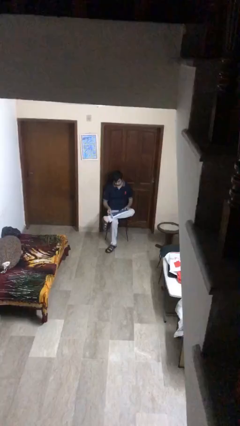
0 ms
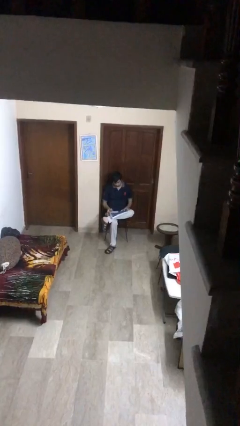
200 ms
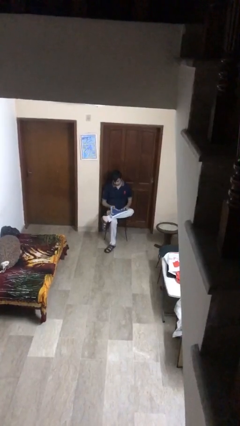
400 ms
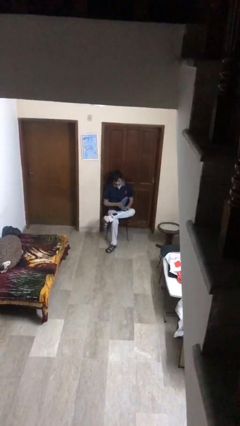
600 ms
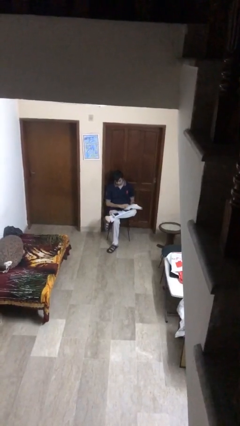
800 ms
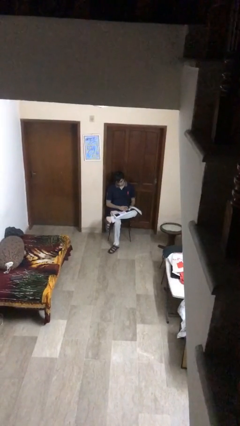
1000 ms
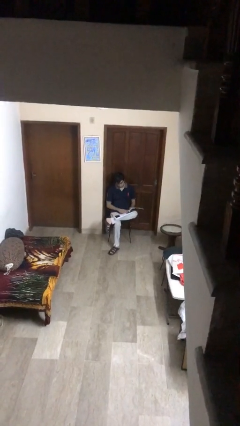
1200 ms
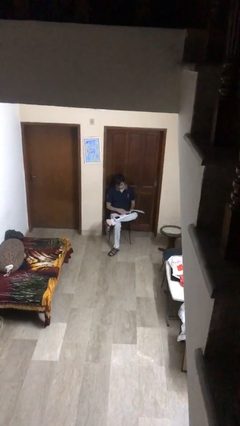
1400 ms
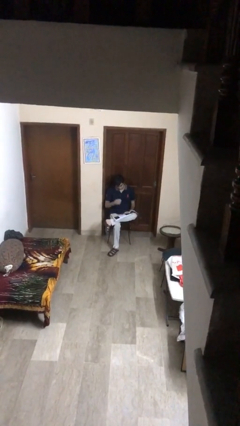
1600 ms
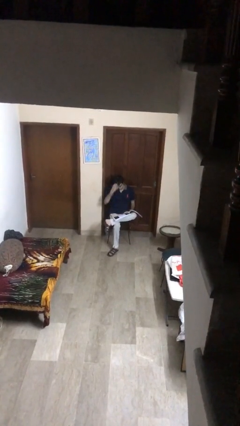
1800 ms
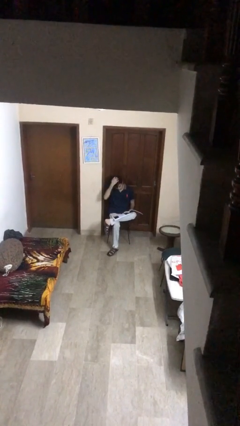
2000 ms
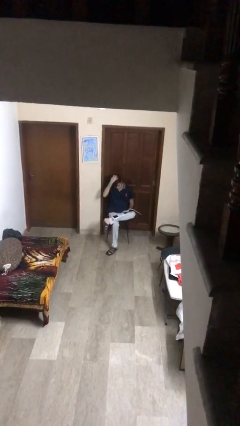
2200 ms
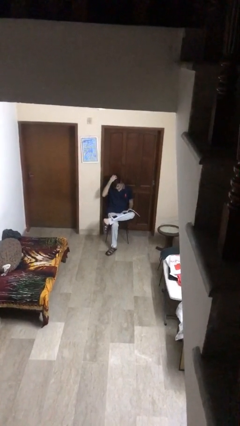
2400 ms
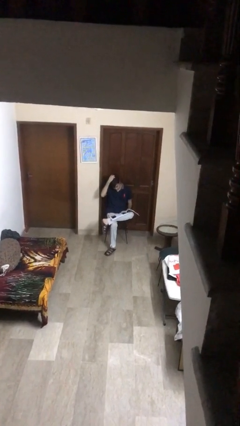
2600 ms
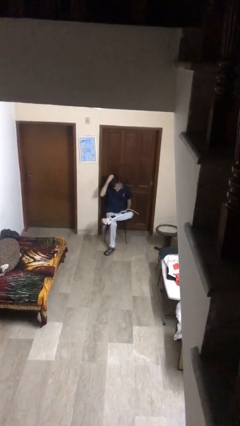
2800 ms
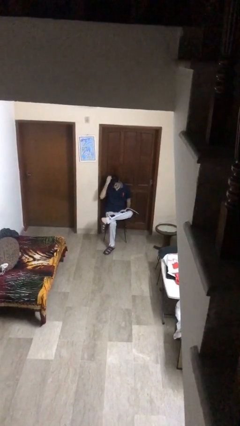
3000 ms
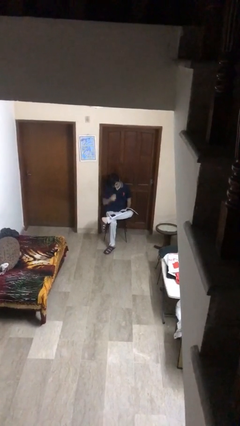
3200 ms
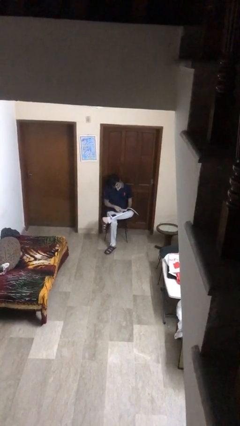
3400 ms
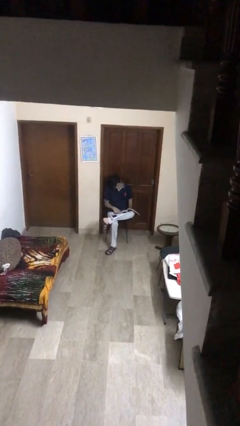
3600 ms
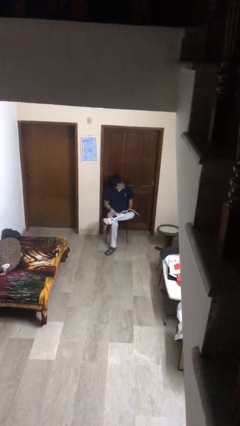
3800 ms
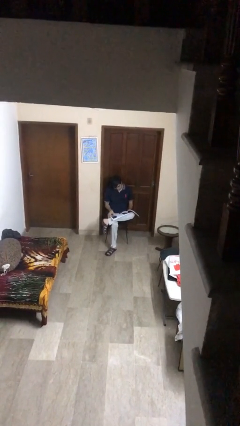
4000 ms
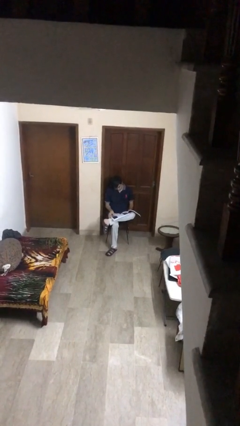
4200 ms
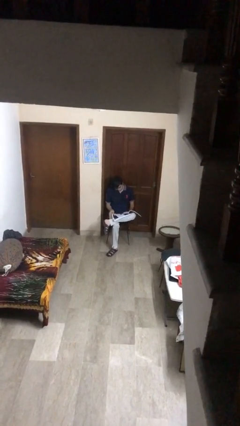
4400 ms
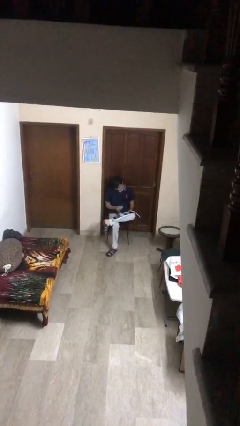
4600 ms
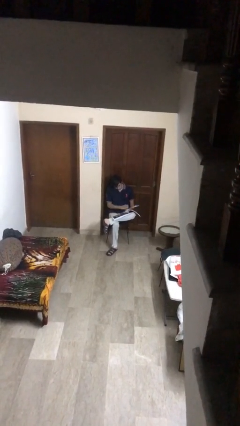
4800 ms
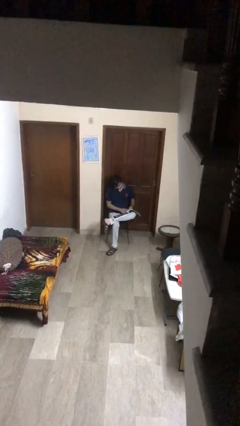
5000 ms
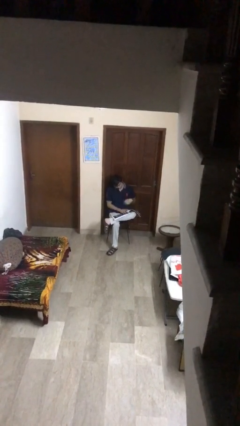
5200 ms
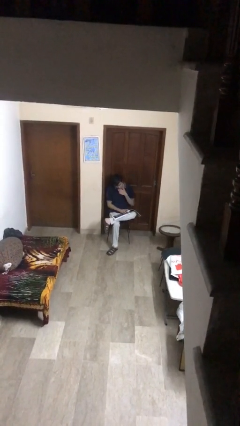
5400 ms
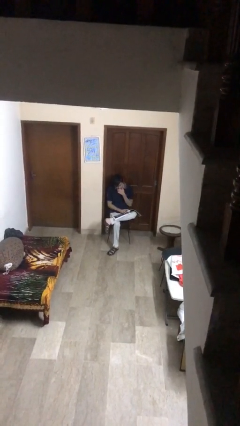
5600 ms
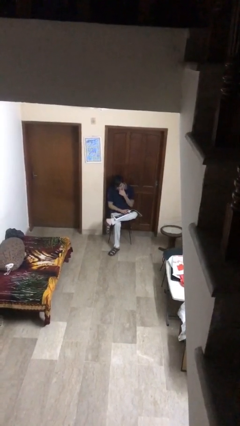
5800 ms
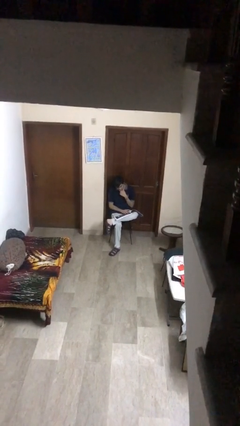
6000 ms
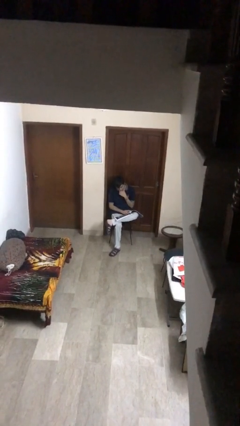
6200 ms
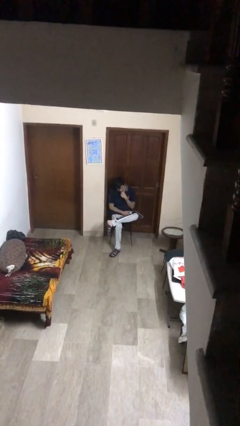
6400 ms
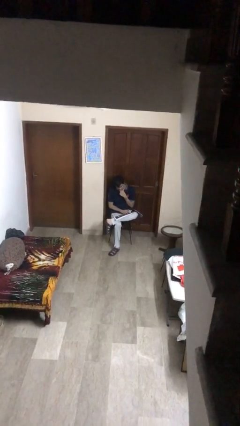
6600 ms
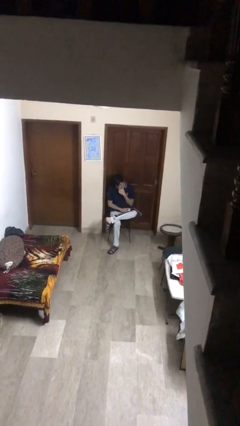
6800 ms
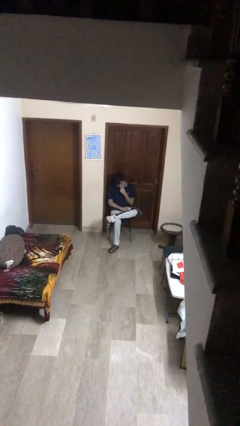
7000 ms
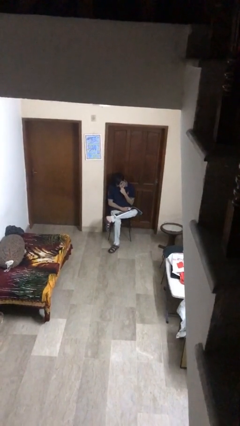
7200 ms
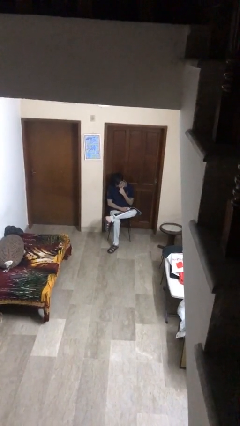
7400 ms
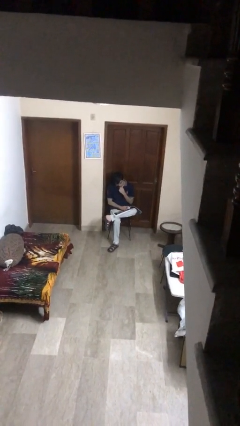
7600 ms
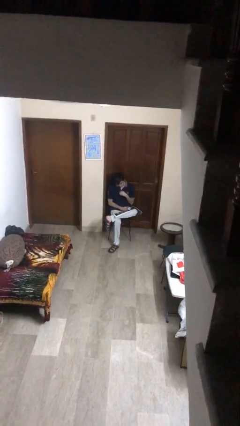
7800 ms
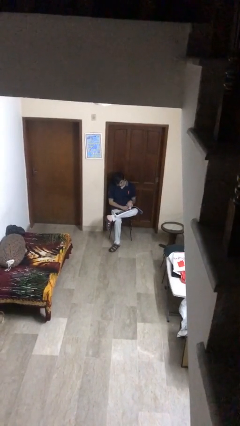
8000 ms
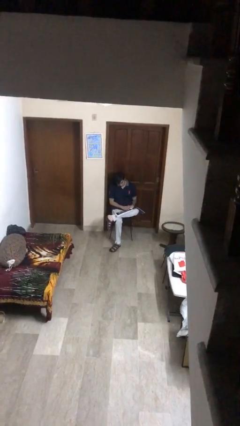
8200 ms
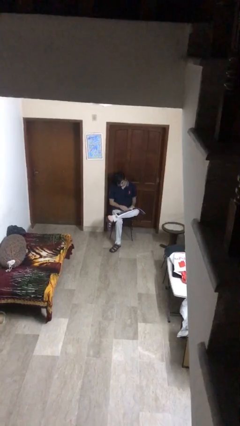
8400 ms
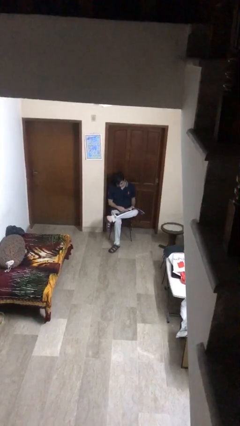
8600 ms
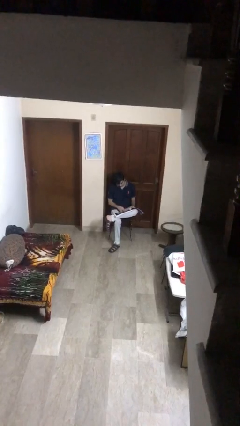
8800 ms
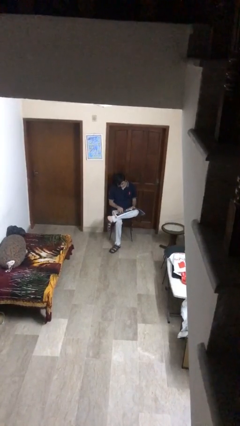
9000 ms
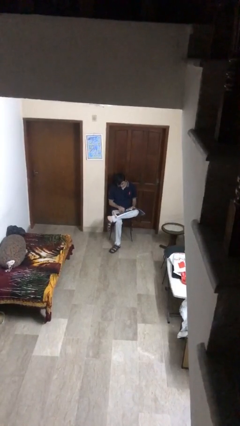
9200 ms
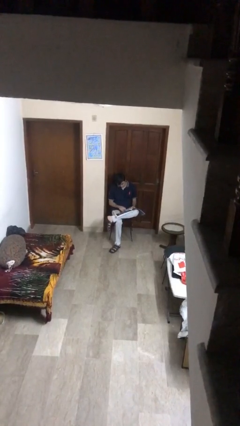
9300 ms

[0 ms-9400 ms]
person reads document

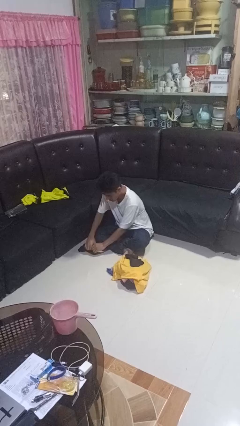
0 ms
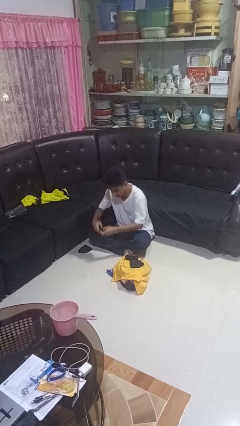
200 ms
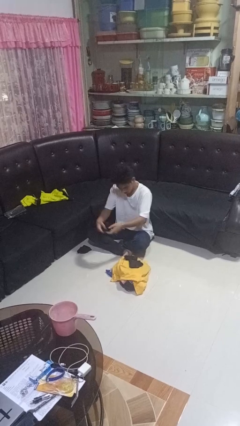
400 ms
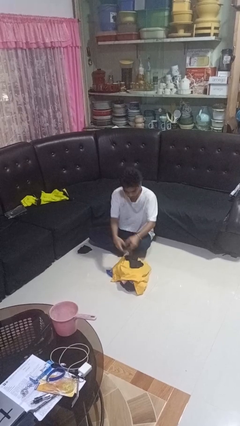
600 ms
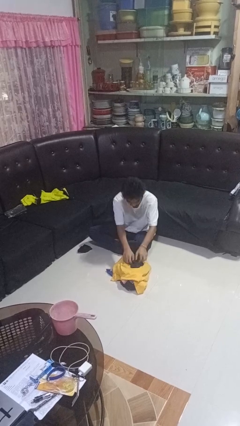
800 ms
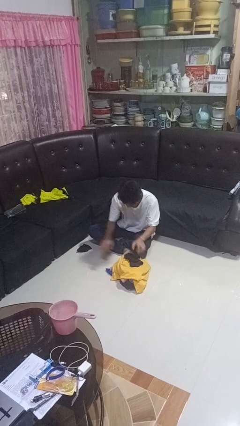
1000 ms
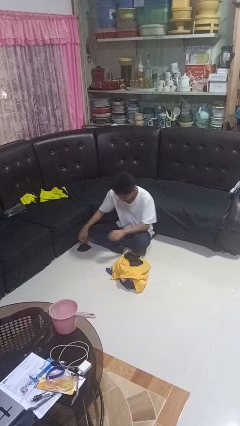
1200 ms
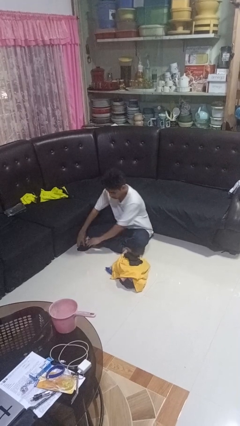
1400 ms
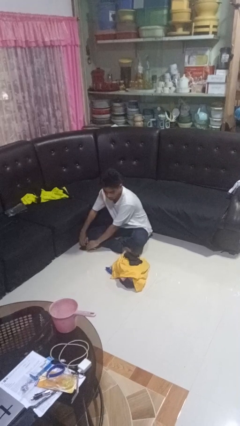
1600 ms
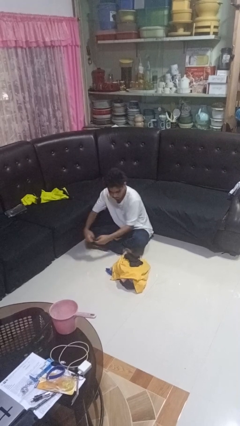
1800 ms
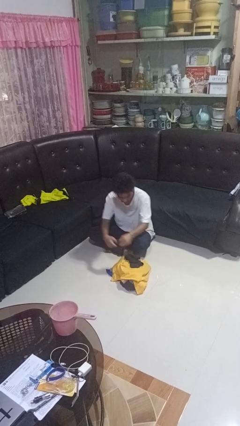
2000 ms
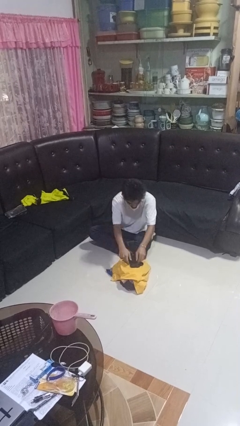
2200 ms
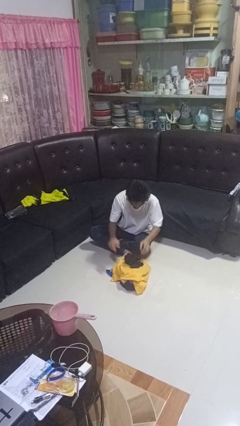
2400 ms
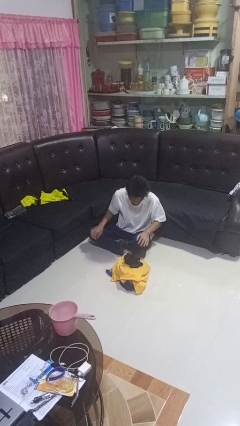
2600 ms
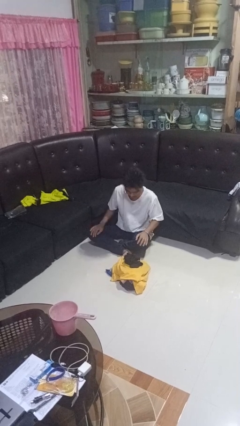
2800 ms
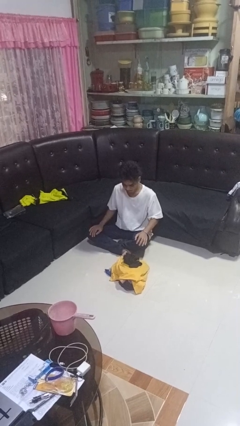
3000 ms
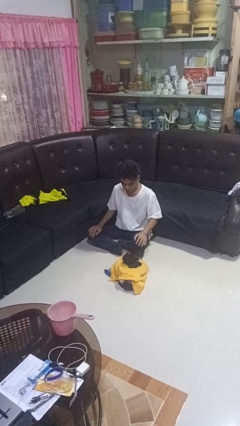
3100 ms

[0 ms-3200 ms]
person folds socks

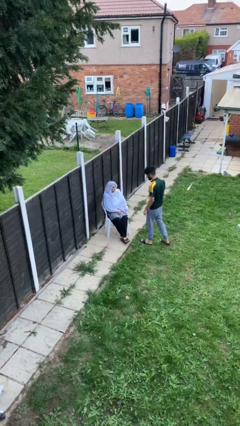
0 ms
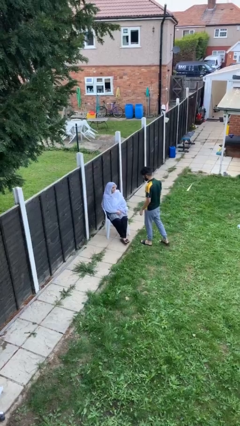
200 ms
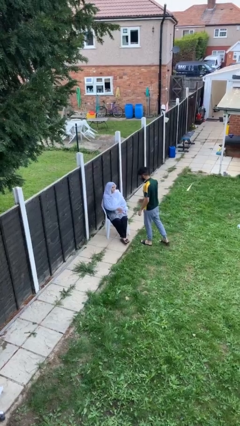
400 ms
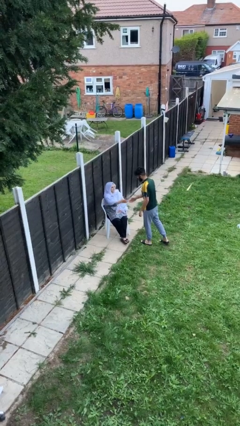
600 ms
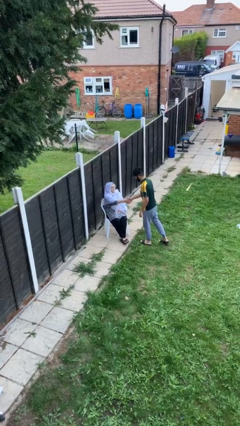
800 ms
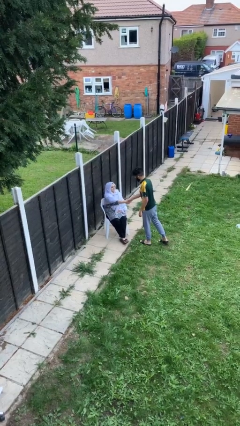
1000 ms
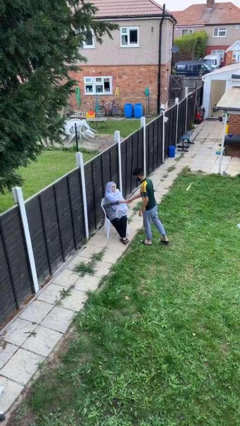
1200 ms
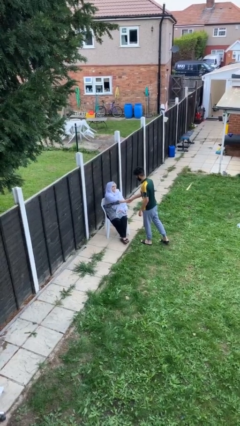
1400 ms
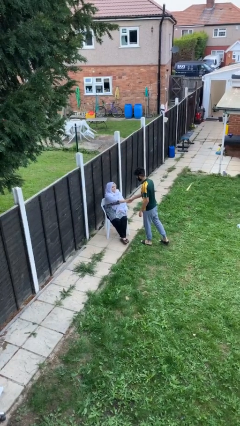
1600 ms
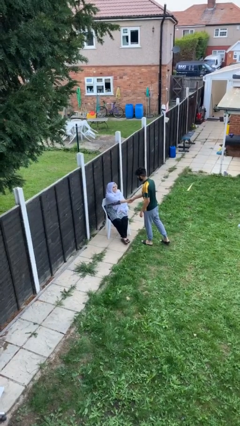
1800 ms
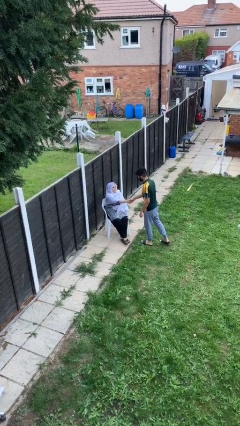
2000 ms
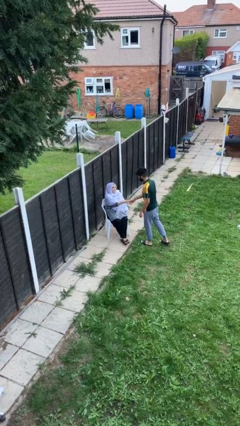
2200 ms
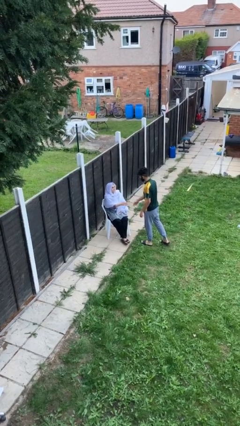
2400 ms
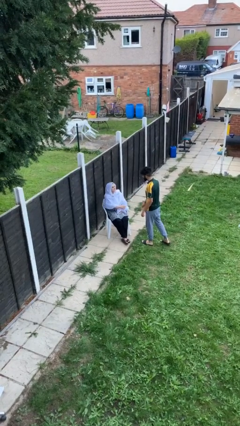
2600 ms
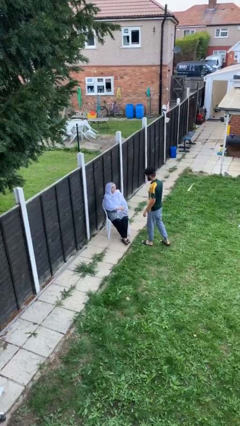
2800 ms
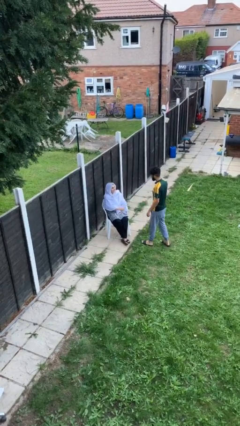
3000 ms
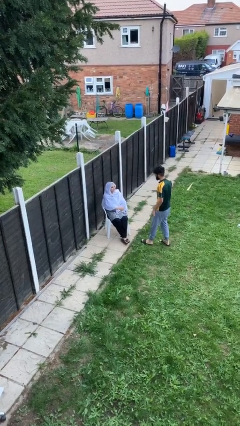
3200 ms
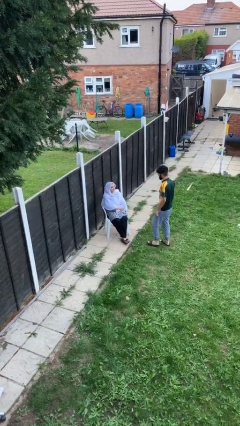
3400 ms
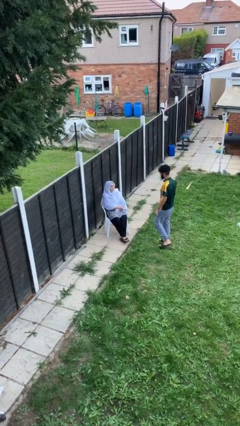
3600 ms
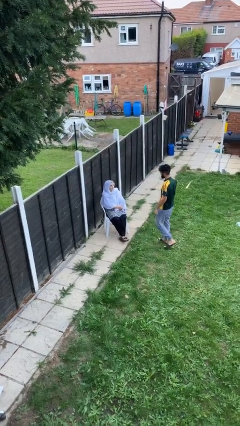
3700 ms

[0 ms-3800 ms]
person shakes hand

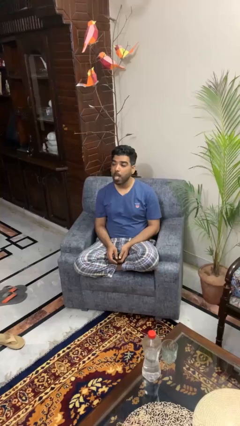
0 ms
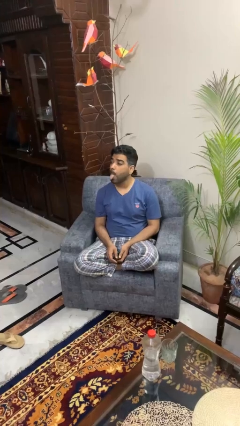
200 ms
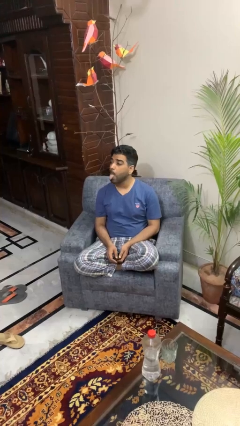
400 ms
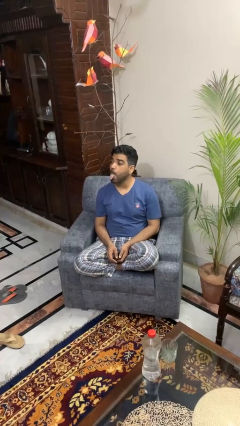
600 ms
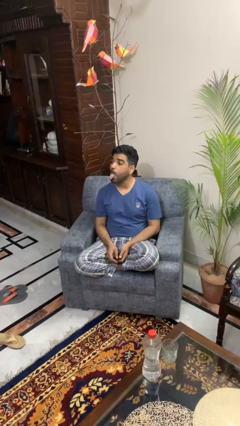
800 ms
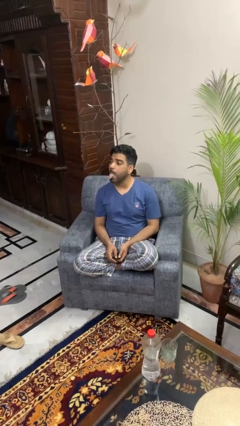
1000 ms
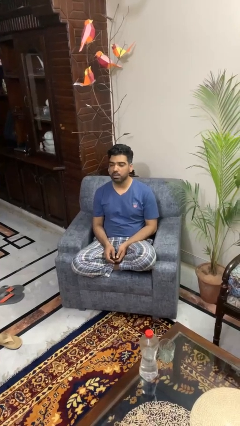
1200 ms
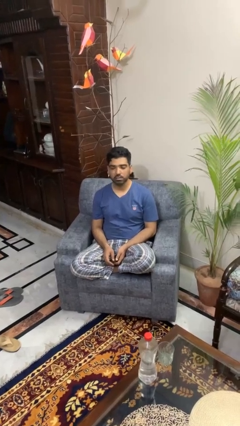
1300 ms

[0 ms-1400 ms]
person sticks out tongue
